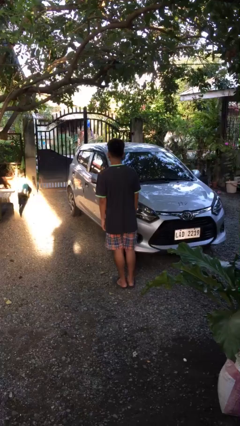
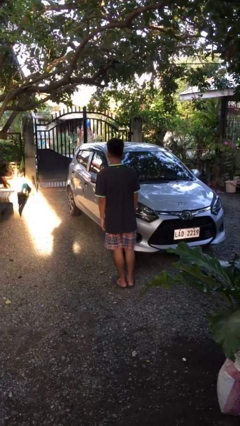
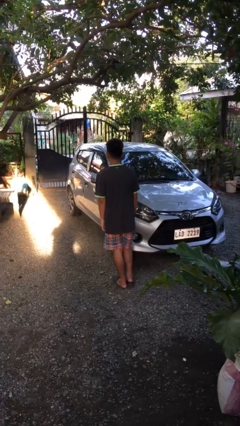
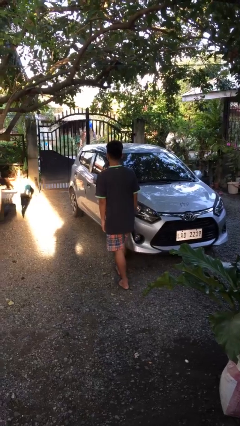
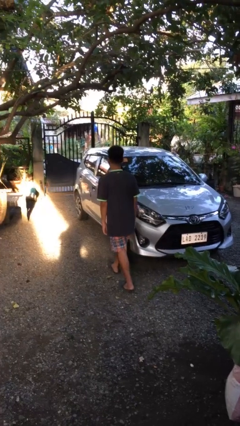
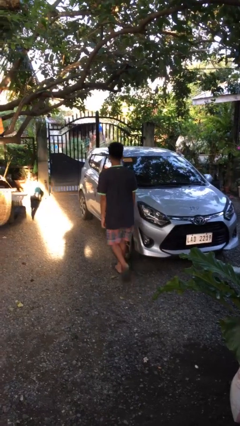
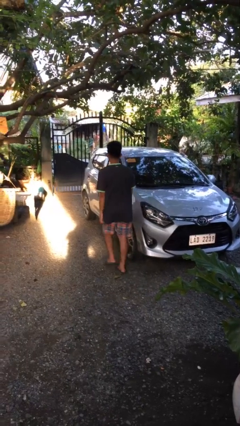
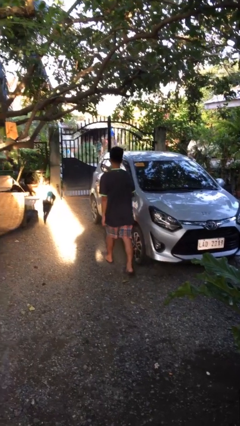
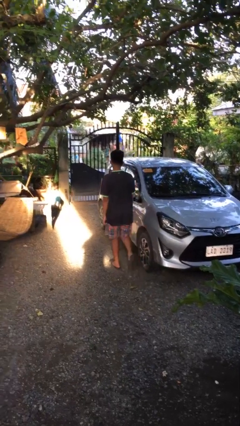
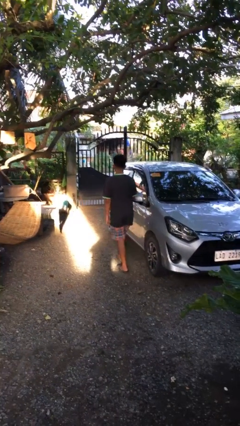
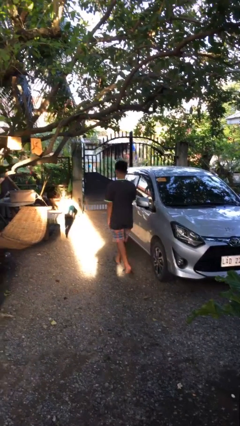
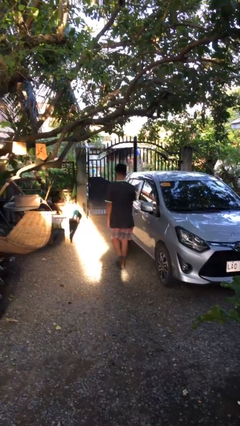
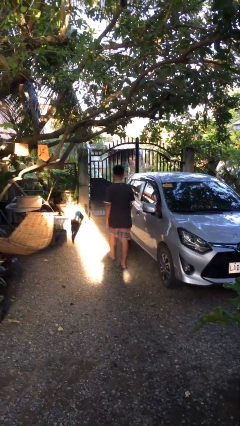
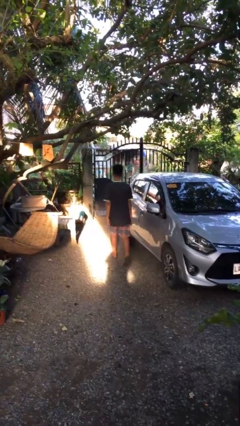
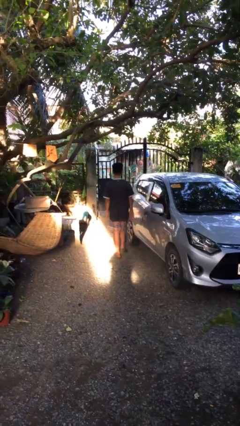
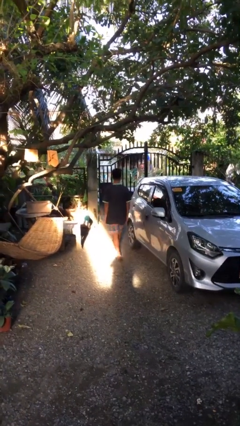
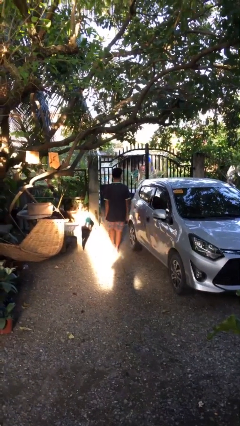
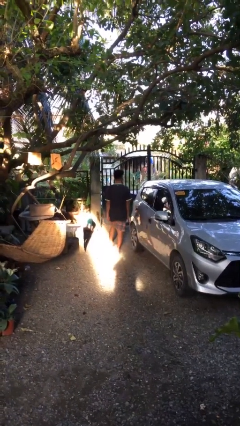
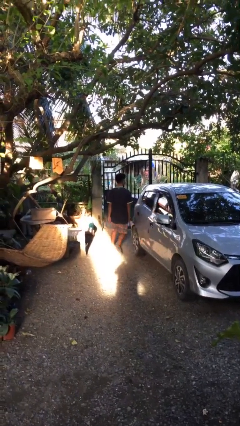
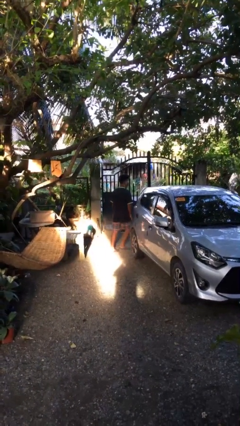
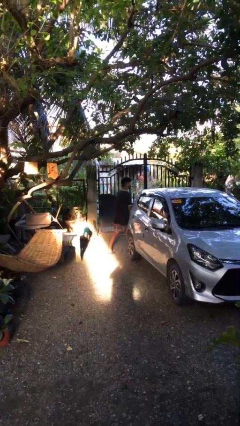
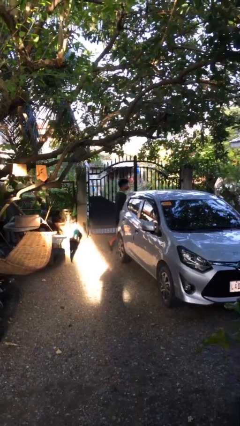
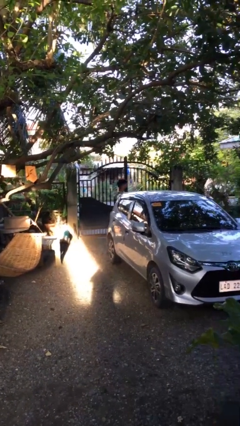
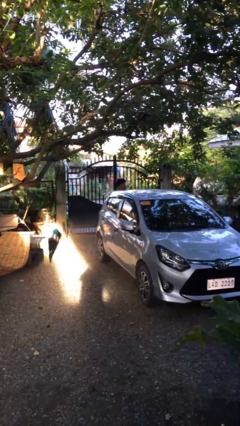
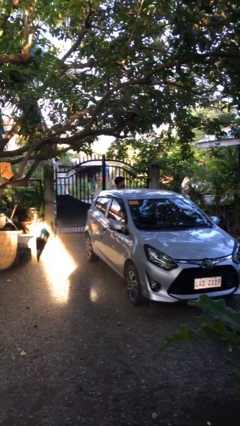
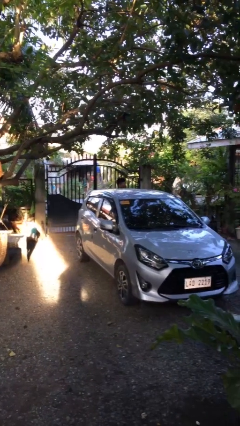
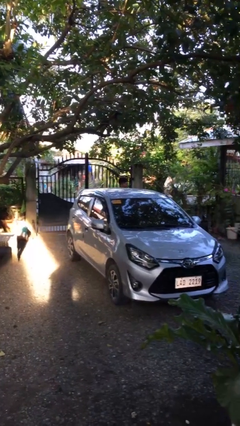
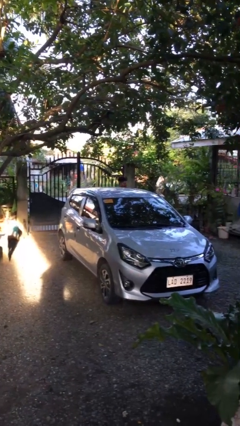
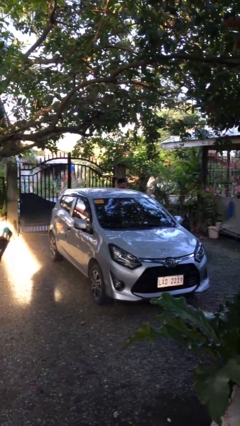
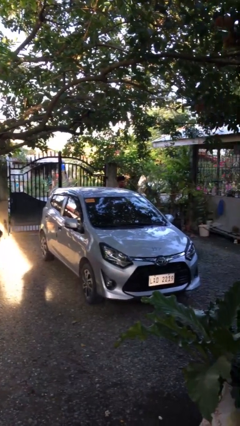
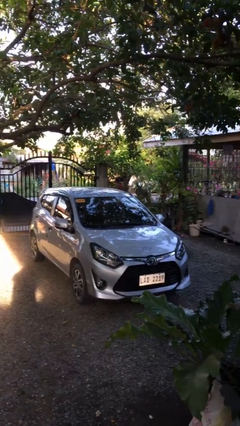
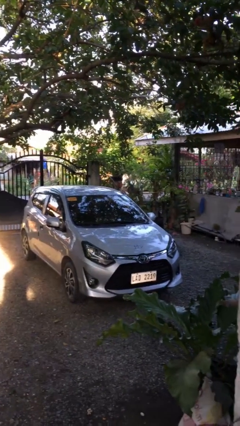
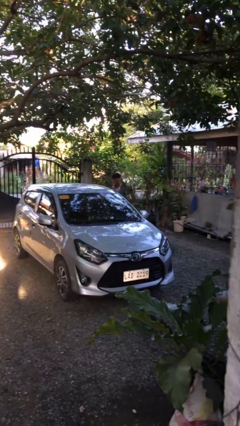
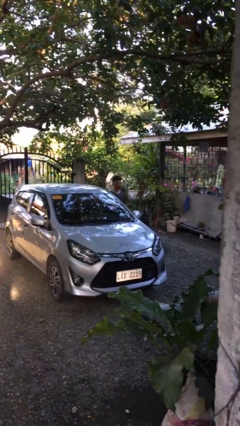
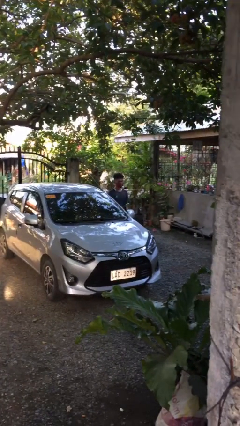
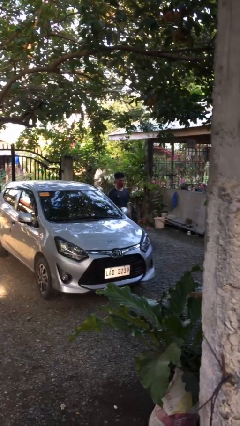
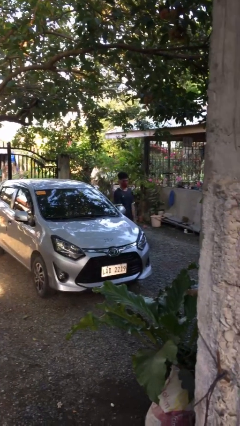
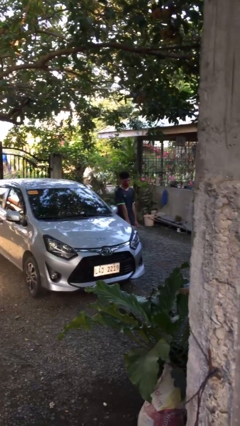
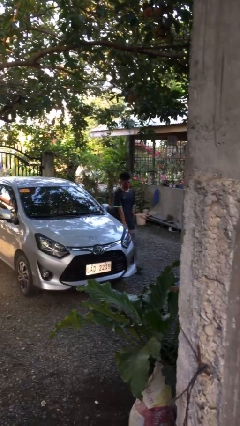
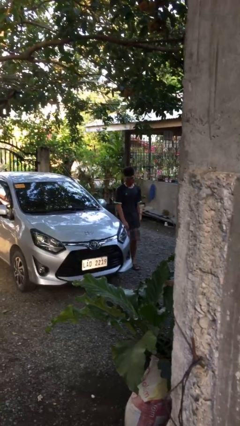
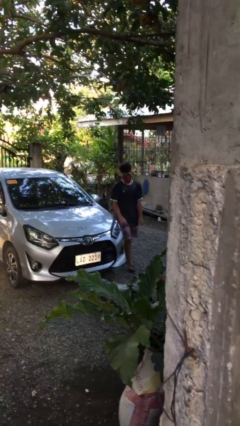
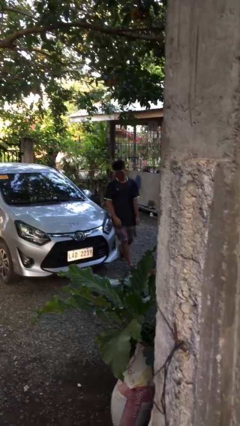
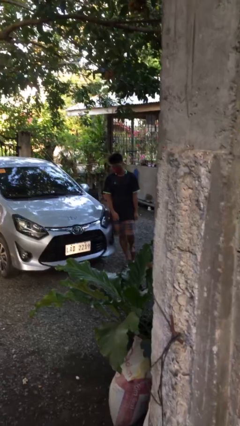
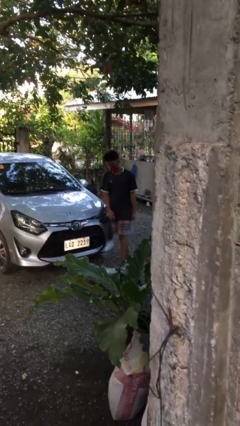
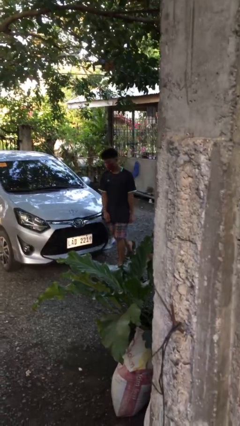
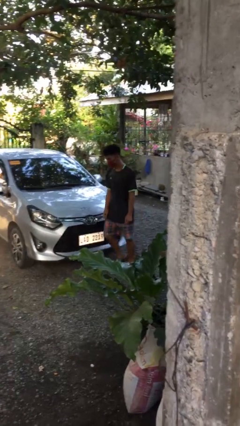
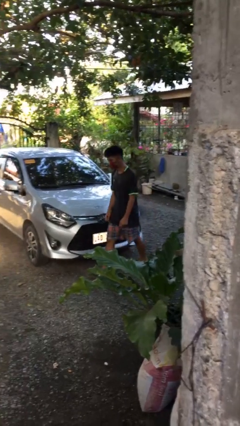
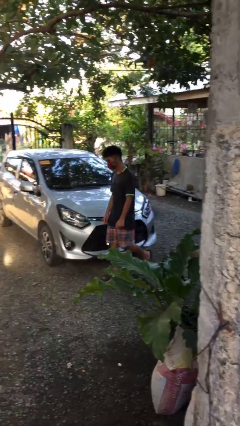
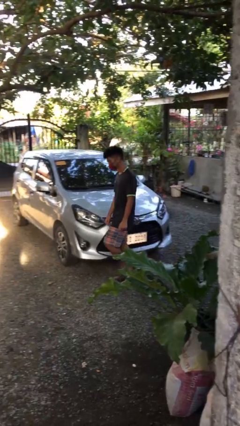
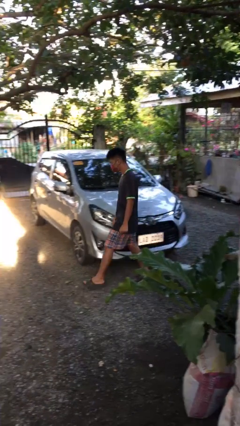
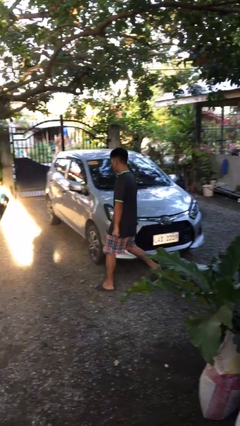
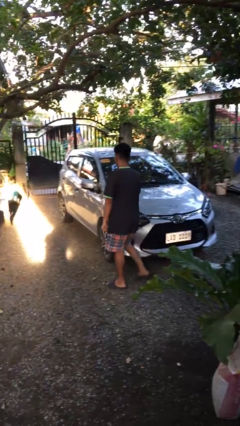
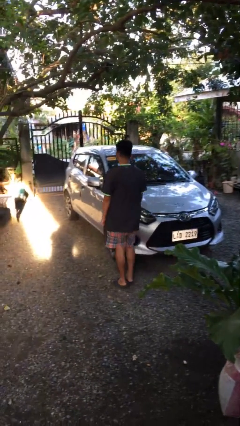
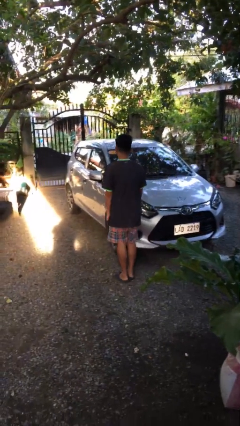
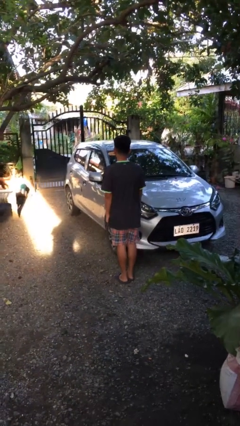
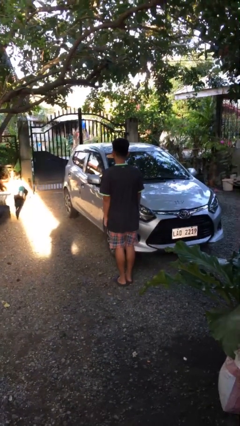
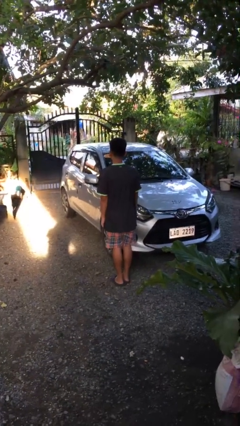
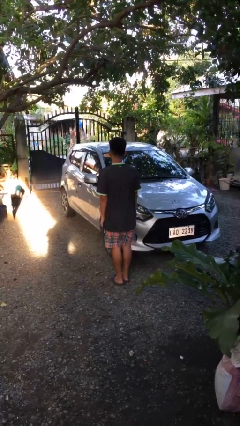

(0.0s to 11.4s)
person walks around car

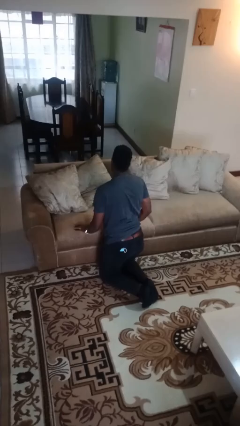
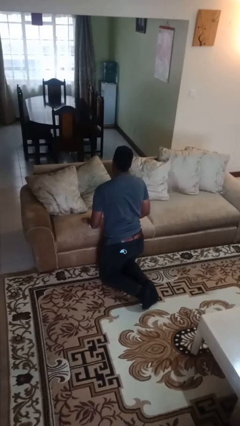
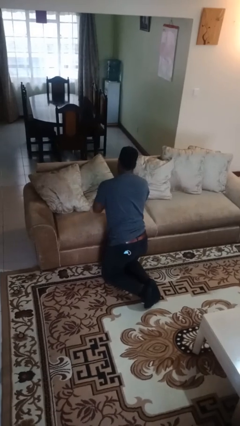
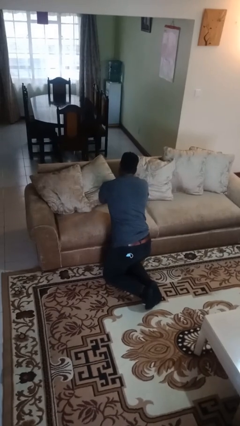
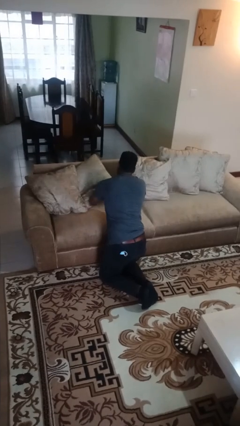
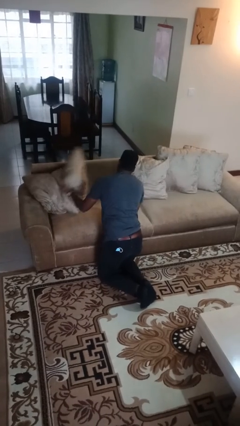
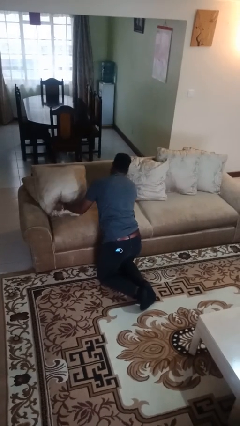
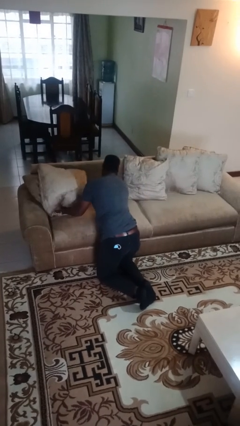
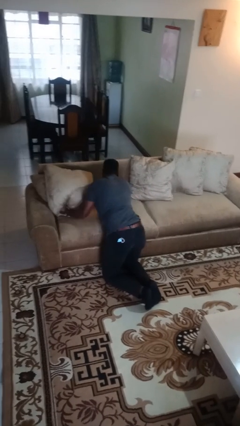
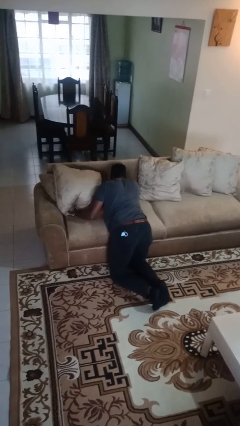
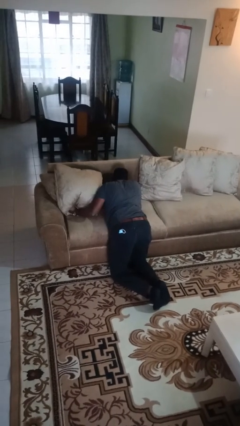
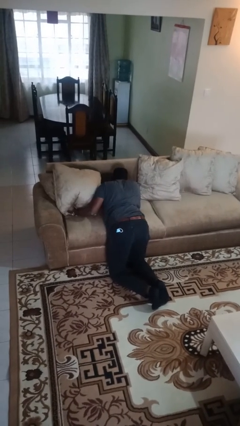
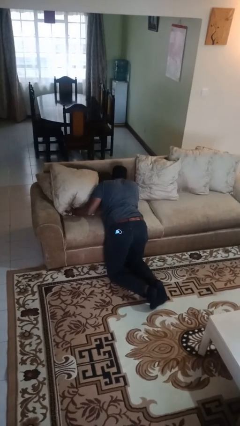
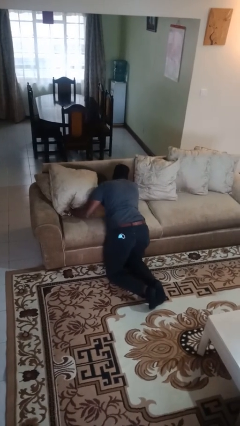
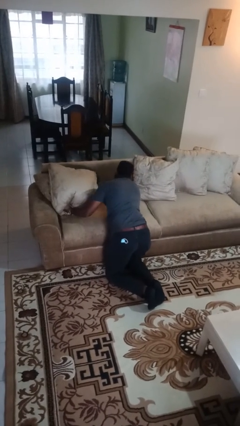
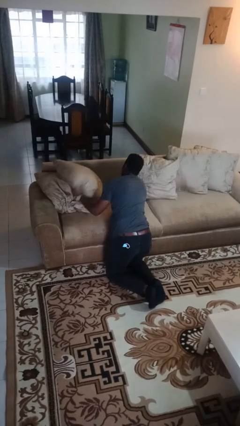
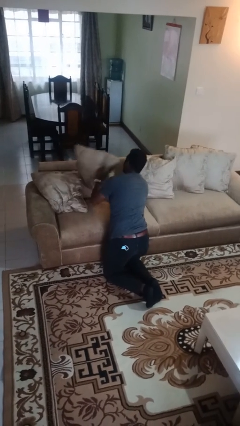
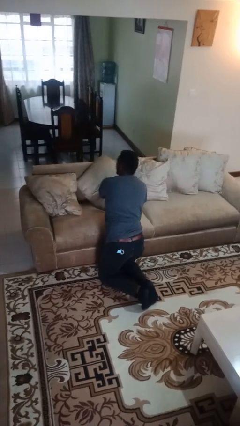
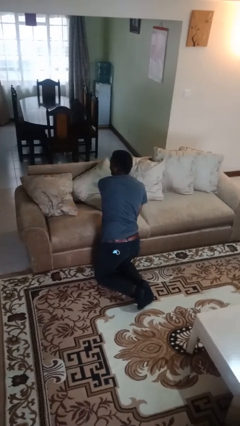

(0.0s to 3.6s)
person searches in couch

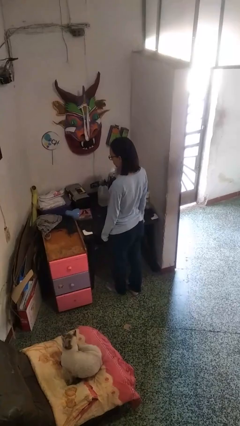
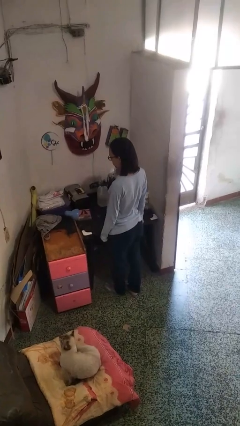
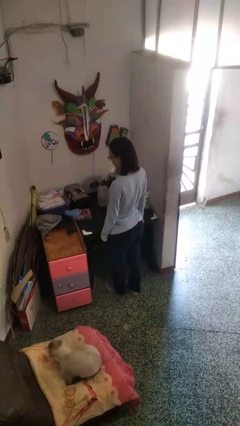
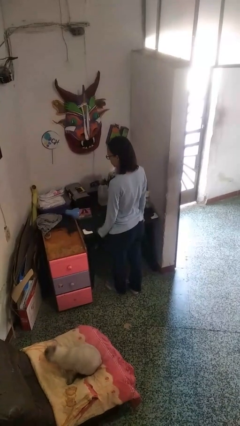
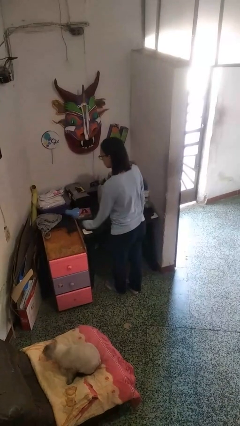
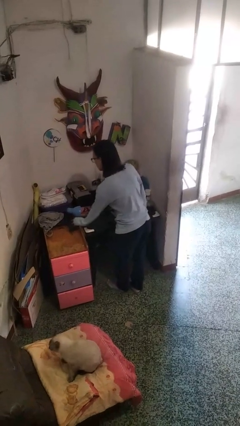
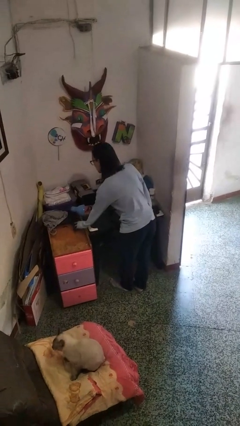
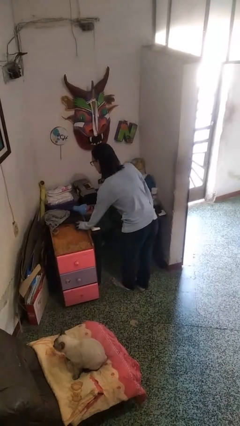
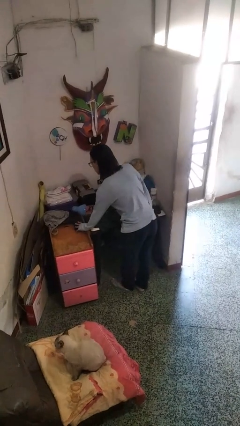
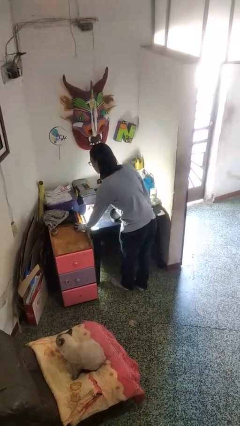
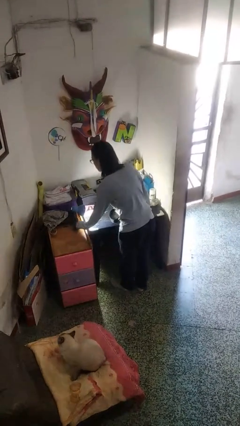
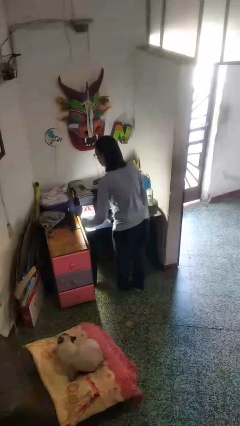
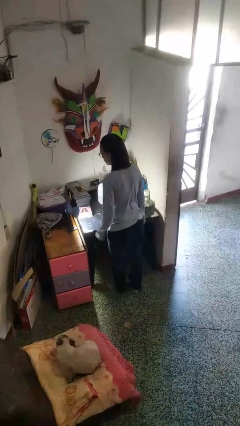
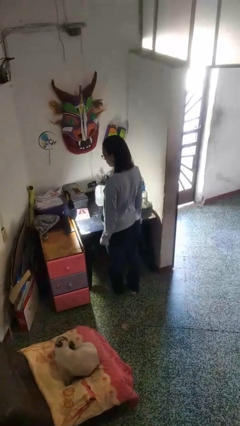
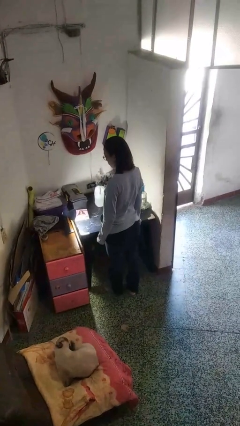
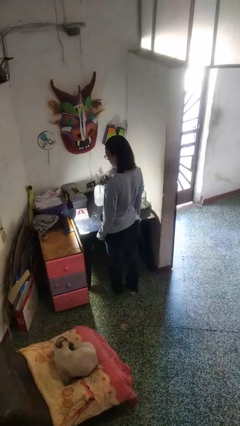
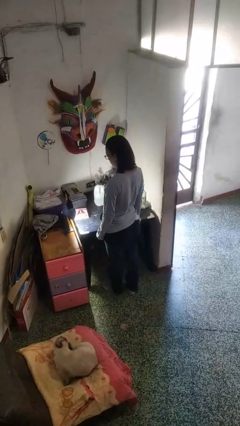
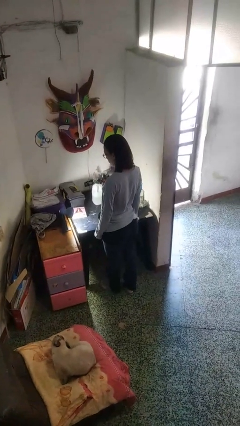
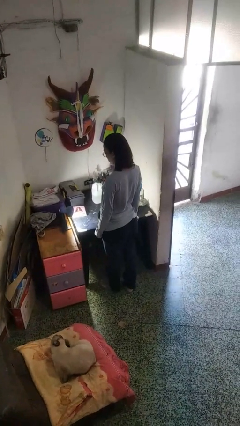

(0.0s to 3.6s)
person turns on lamp
